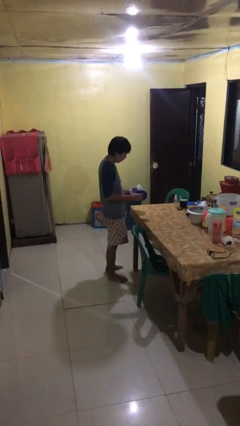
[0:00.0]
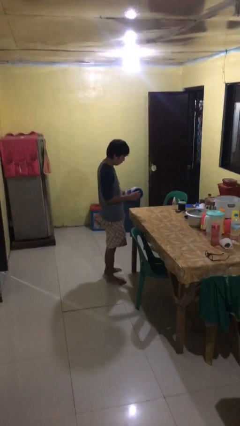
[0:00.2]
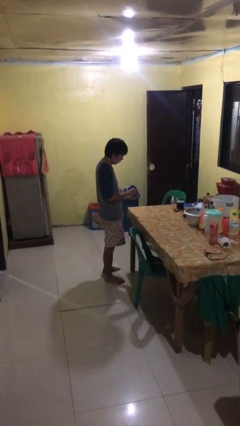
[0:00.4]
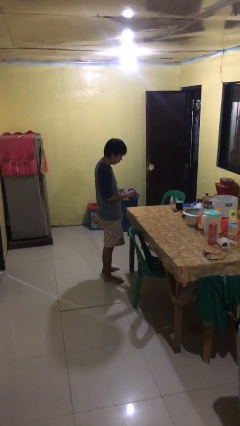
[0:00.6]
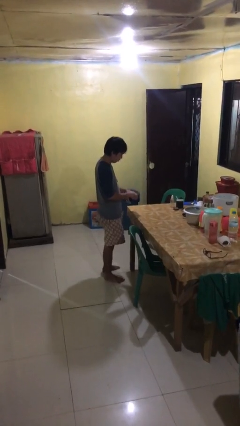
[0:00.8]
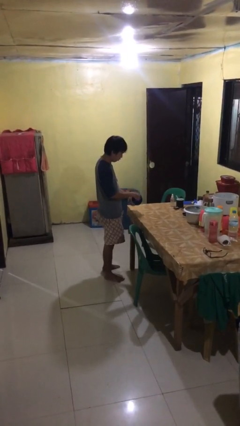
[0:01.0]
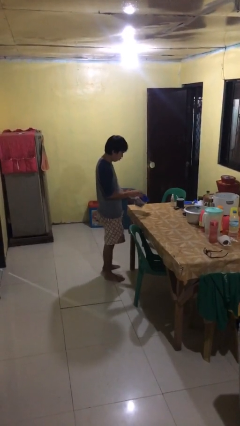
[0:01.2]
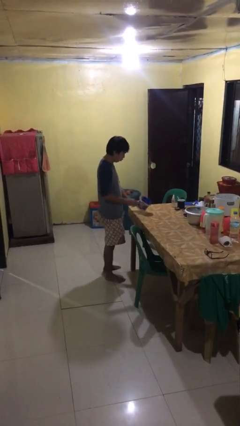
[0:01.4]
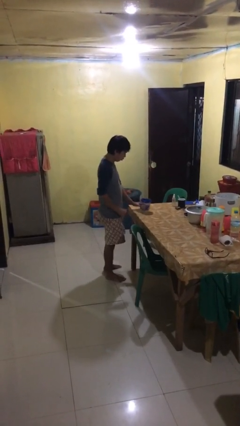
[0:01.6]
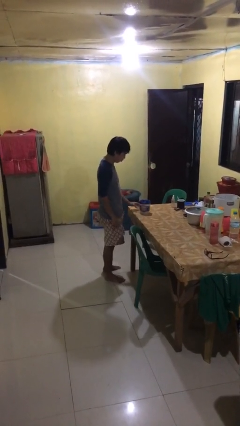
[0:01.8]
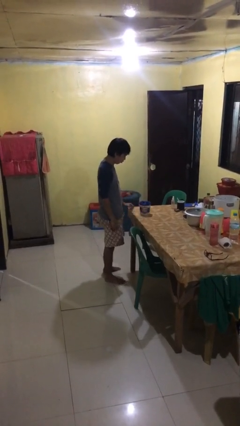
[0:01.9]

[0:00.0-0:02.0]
person closes jar

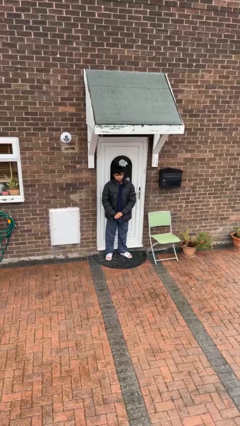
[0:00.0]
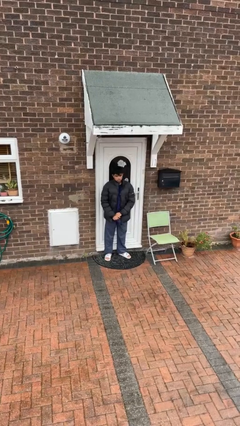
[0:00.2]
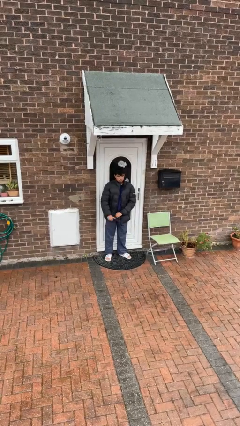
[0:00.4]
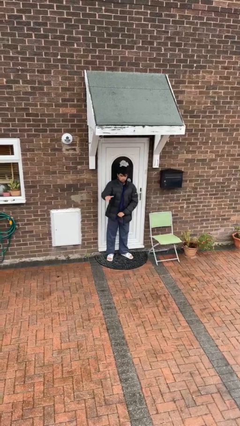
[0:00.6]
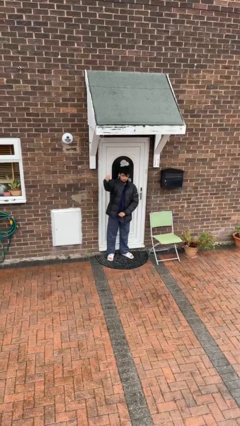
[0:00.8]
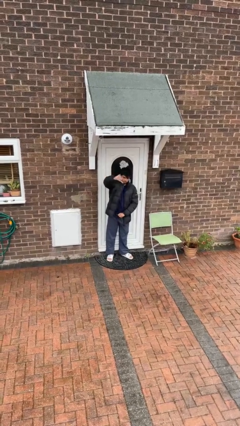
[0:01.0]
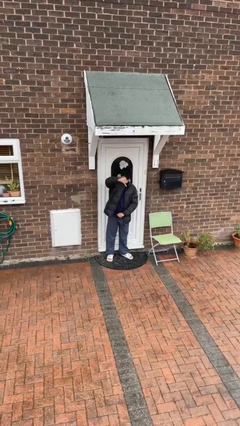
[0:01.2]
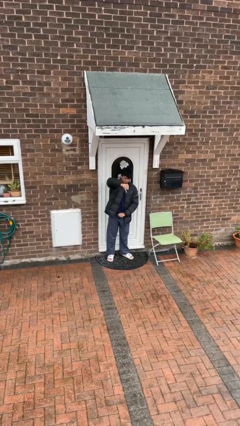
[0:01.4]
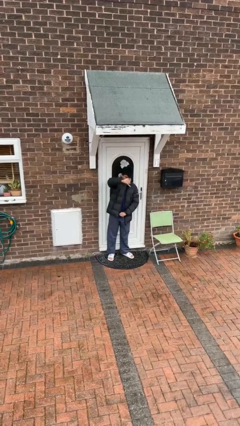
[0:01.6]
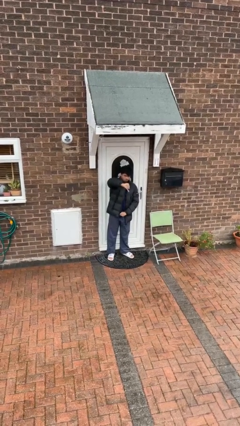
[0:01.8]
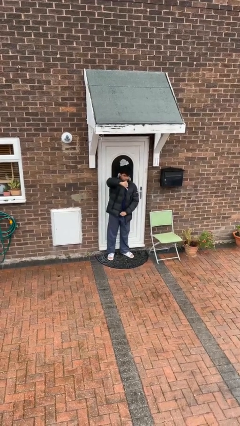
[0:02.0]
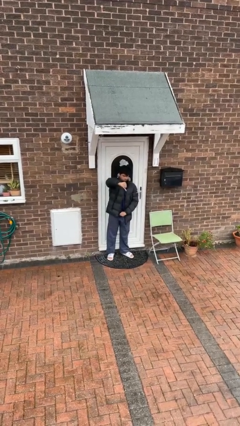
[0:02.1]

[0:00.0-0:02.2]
person gestures thumbs down

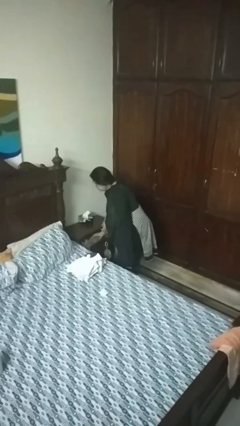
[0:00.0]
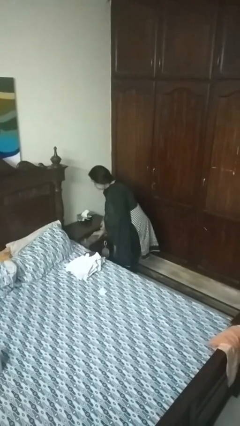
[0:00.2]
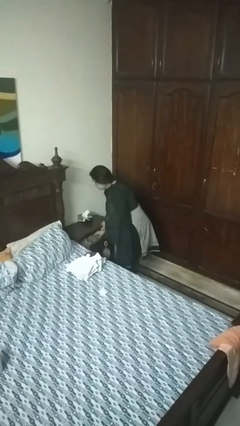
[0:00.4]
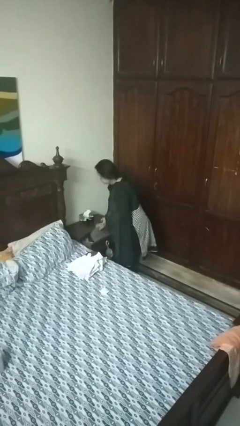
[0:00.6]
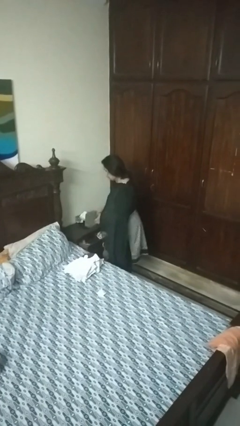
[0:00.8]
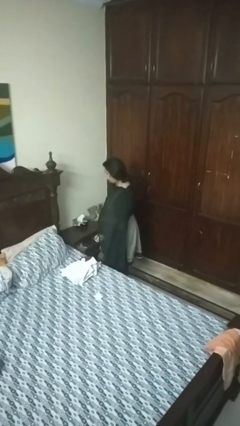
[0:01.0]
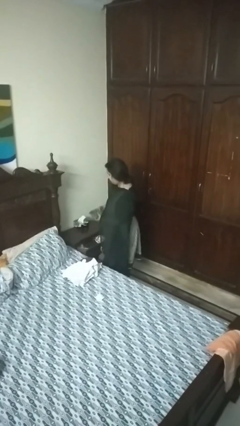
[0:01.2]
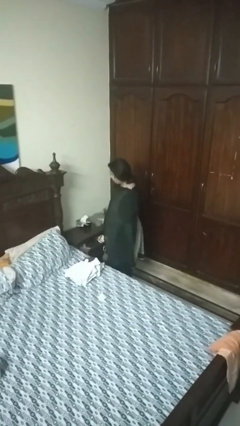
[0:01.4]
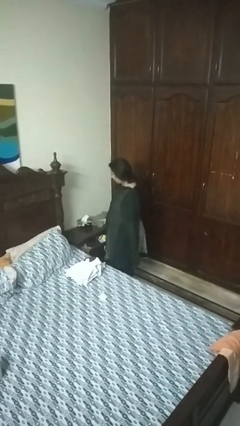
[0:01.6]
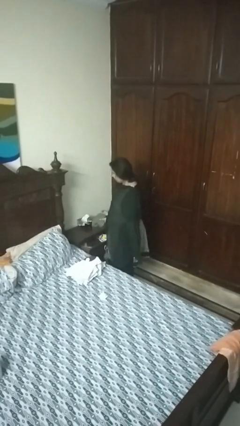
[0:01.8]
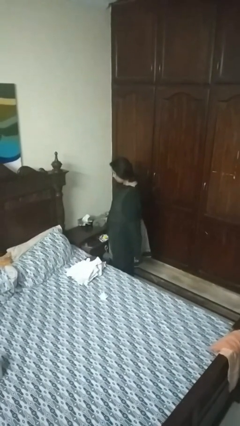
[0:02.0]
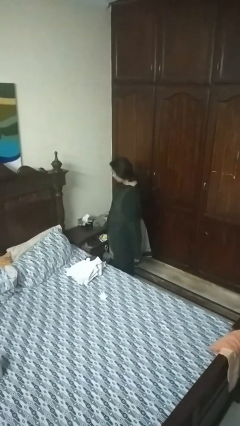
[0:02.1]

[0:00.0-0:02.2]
person takes clothes from dresser

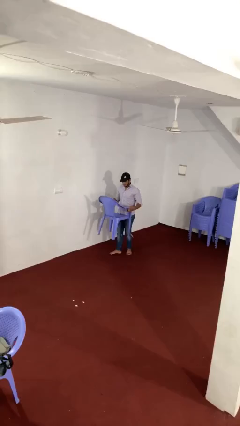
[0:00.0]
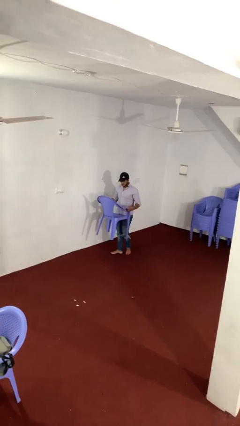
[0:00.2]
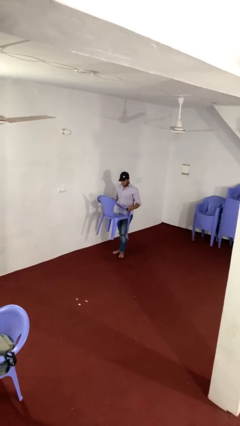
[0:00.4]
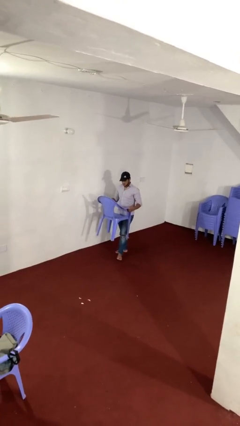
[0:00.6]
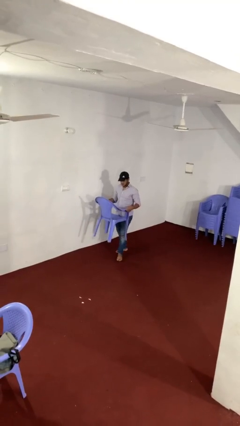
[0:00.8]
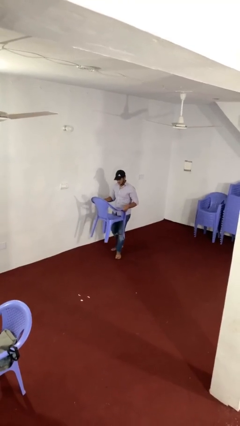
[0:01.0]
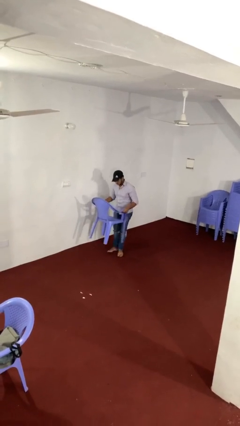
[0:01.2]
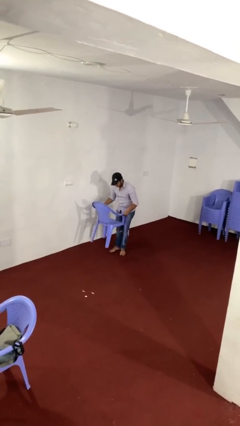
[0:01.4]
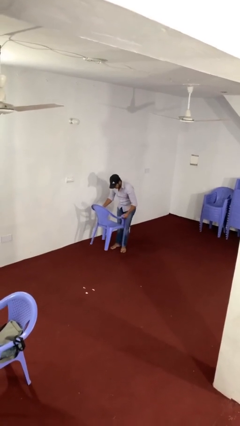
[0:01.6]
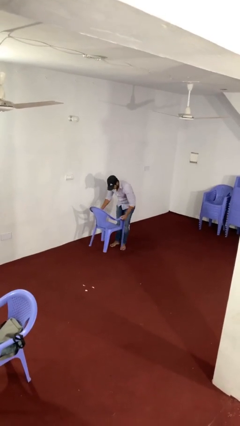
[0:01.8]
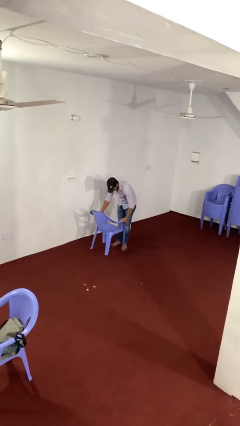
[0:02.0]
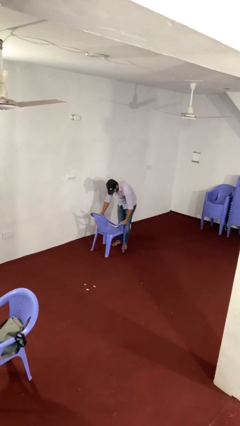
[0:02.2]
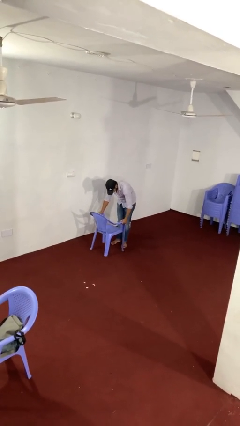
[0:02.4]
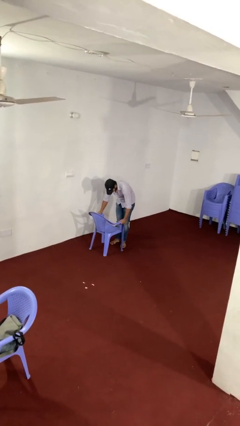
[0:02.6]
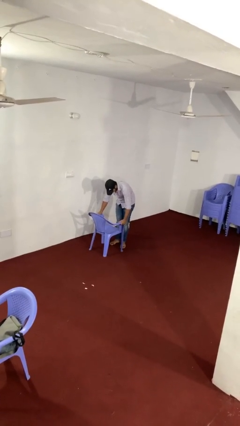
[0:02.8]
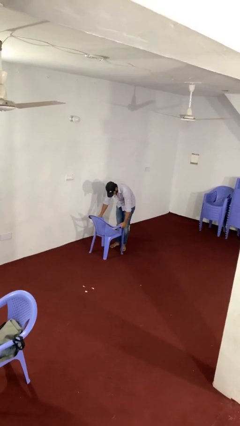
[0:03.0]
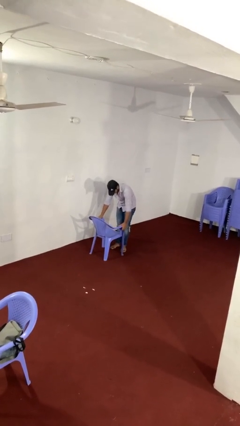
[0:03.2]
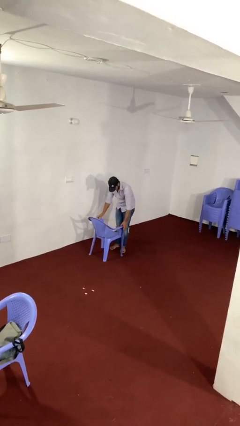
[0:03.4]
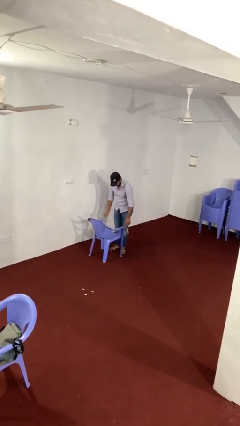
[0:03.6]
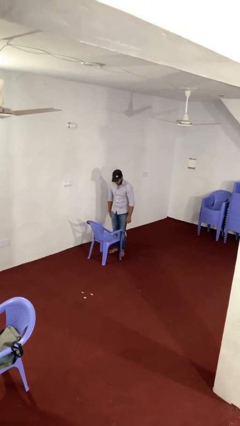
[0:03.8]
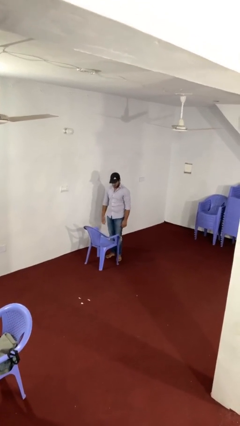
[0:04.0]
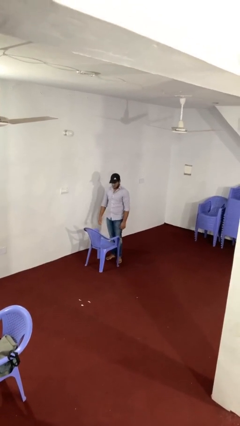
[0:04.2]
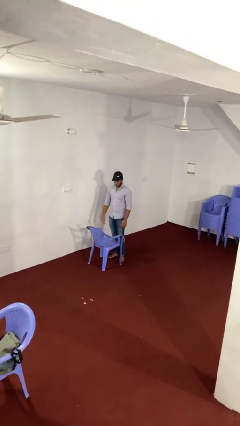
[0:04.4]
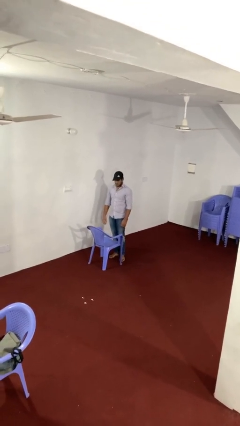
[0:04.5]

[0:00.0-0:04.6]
person puts down object on floor

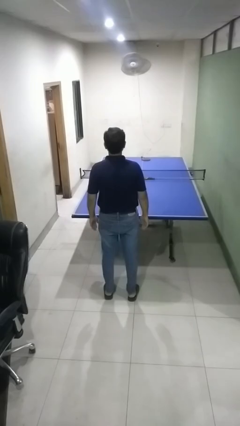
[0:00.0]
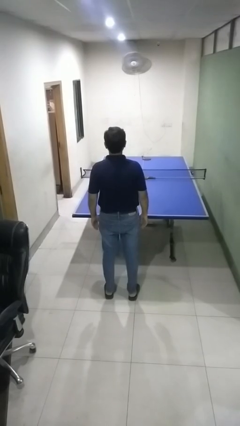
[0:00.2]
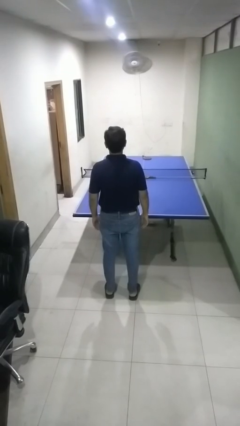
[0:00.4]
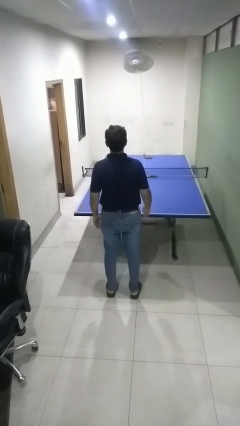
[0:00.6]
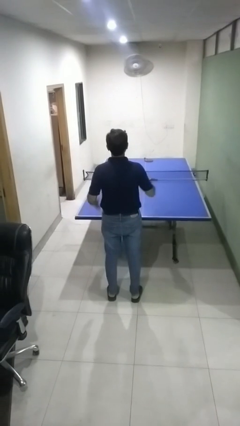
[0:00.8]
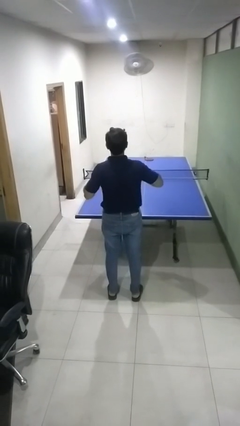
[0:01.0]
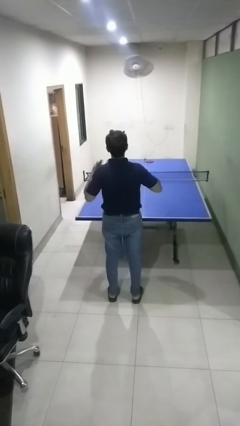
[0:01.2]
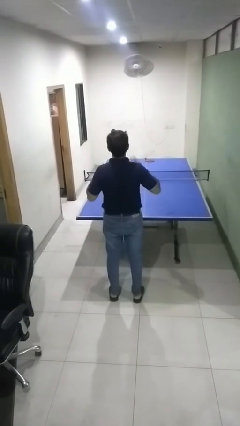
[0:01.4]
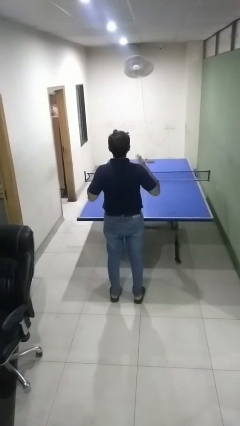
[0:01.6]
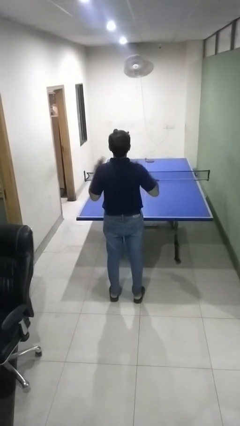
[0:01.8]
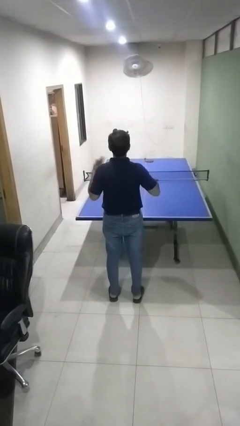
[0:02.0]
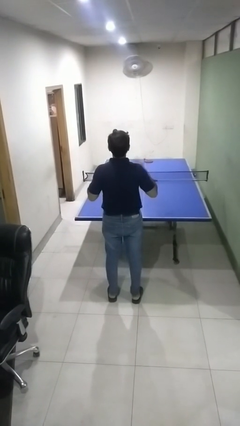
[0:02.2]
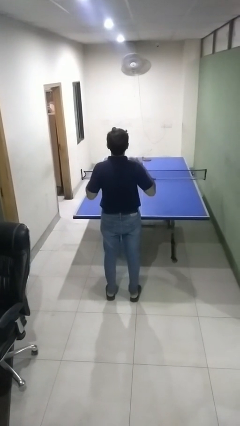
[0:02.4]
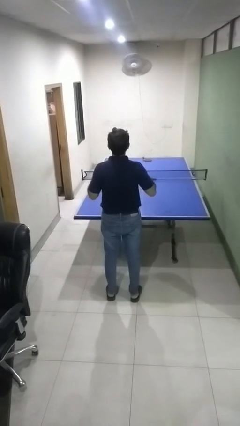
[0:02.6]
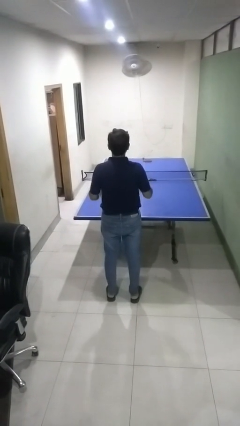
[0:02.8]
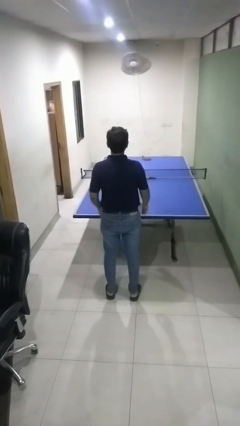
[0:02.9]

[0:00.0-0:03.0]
person drums on chest

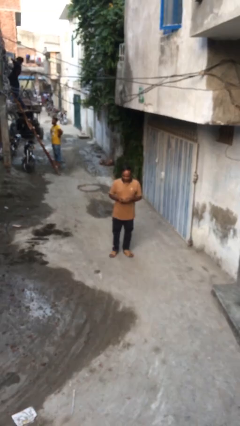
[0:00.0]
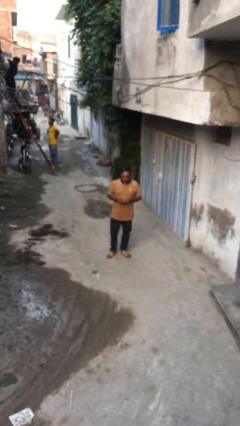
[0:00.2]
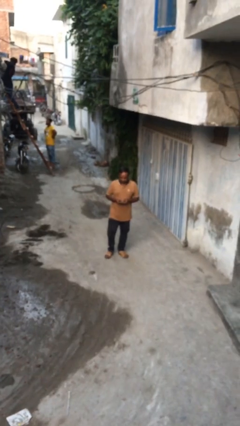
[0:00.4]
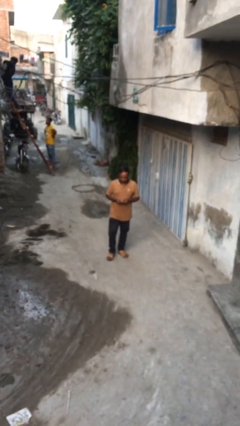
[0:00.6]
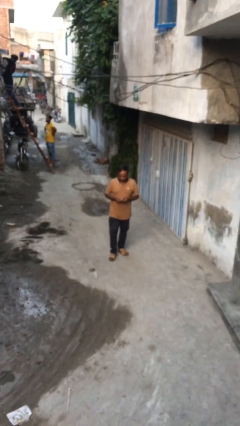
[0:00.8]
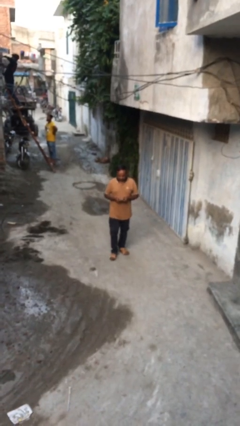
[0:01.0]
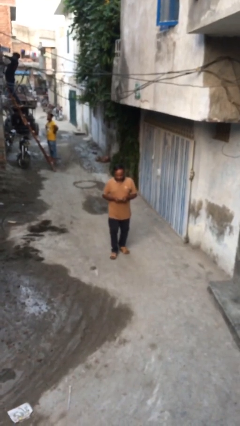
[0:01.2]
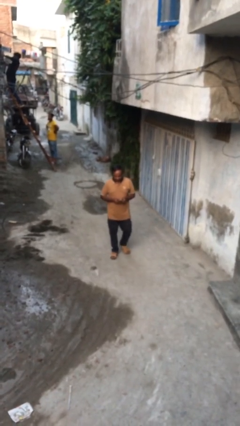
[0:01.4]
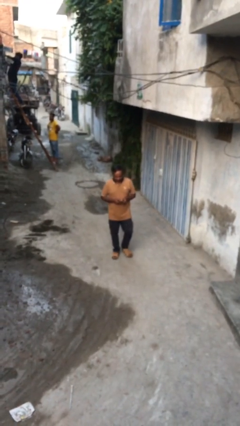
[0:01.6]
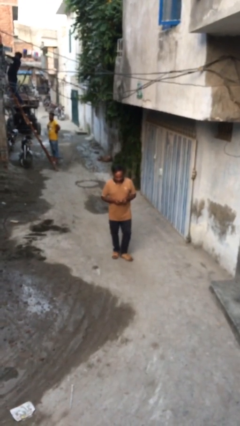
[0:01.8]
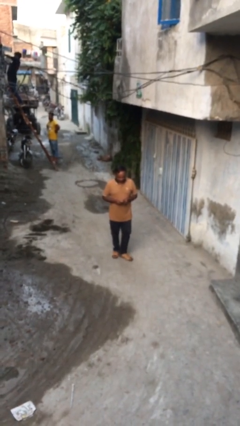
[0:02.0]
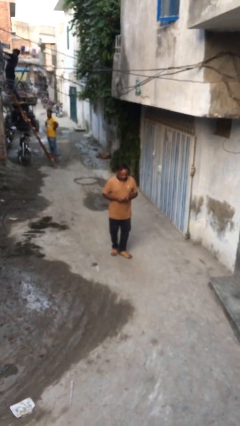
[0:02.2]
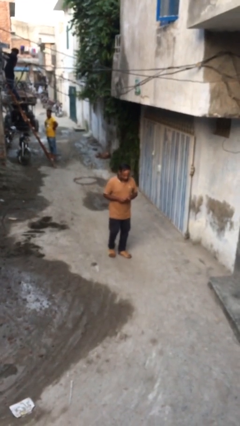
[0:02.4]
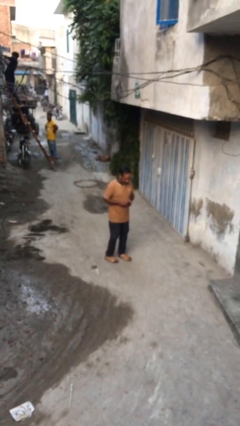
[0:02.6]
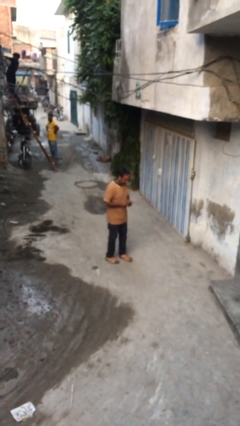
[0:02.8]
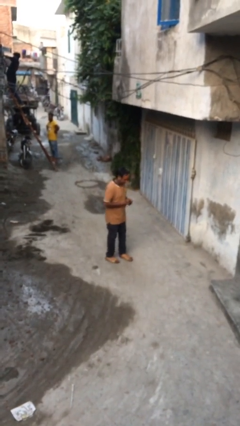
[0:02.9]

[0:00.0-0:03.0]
person texts on phone
